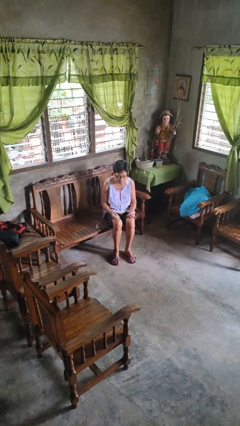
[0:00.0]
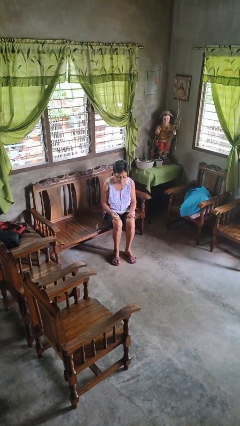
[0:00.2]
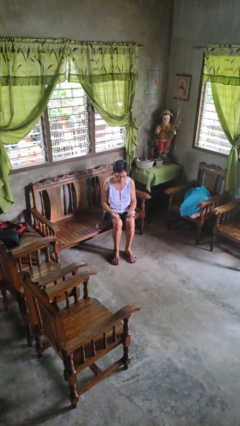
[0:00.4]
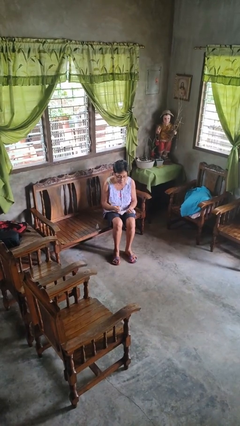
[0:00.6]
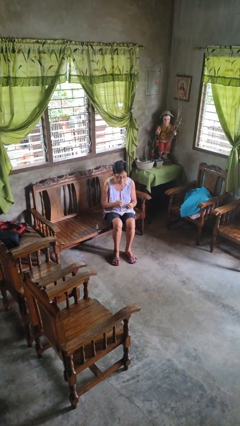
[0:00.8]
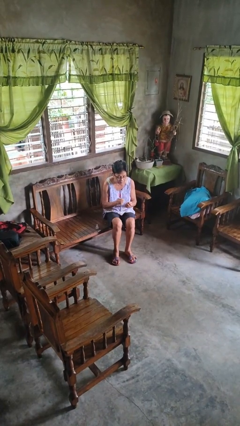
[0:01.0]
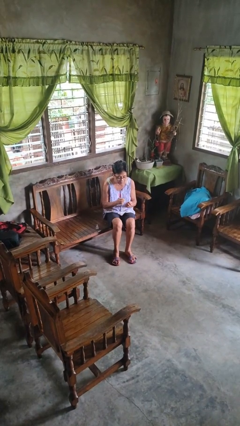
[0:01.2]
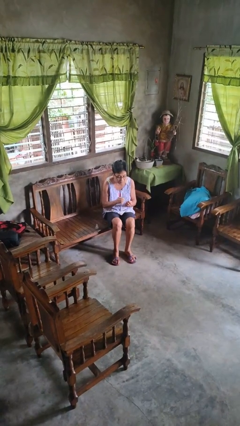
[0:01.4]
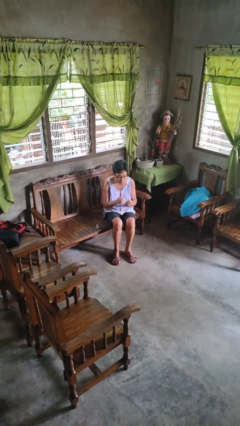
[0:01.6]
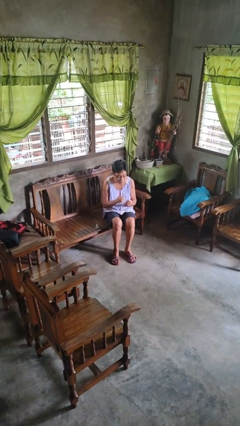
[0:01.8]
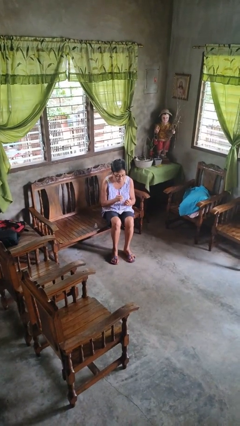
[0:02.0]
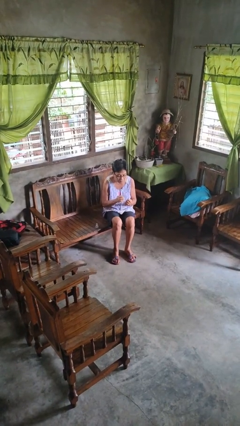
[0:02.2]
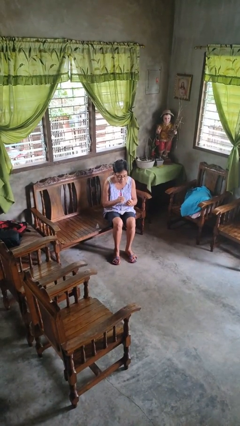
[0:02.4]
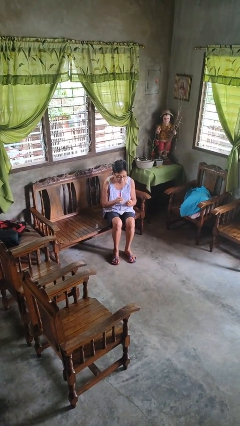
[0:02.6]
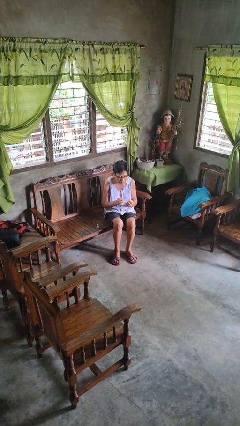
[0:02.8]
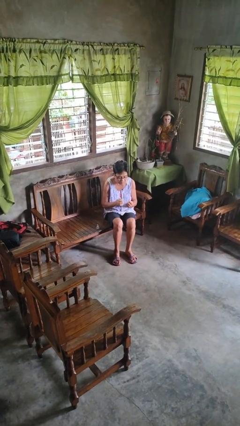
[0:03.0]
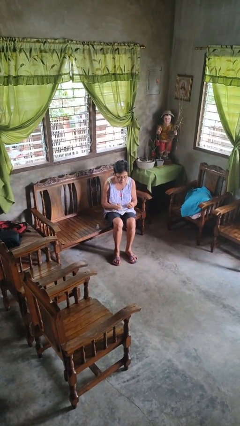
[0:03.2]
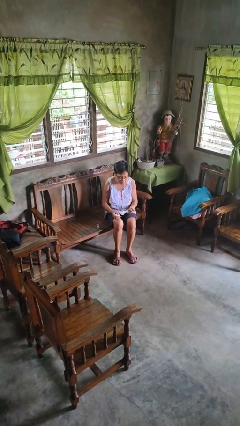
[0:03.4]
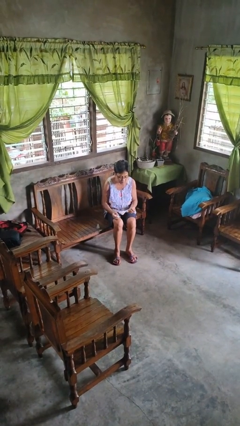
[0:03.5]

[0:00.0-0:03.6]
person paints fingernails

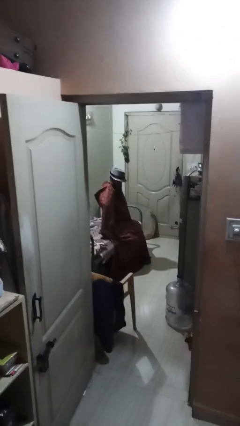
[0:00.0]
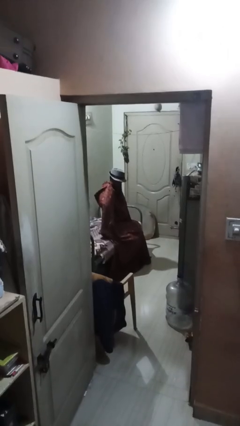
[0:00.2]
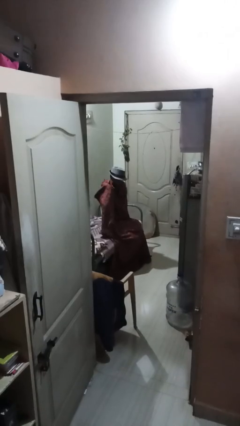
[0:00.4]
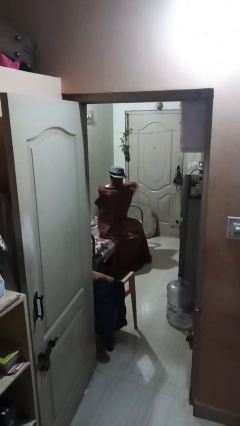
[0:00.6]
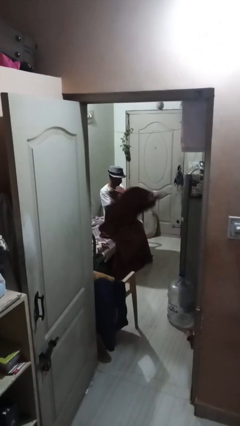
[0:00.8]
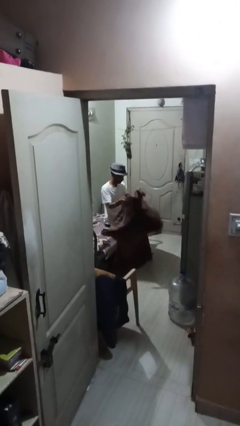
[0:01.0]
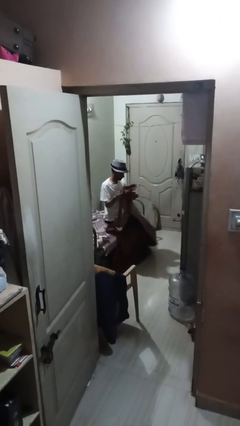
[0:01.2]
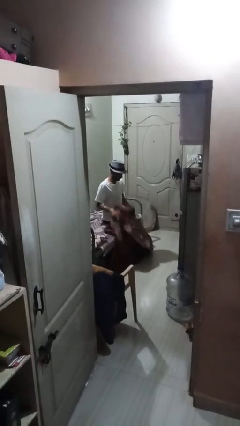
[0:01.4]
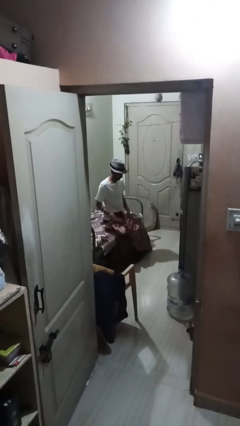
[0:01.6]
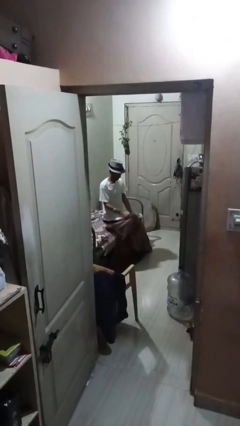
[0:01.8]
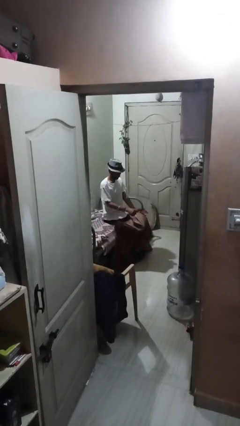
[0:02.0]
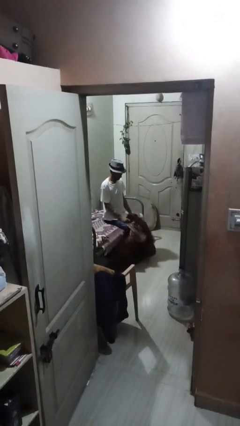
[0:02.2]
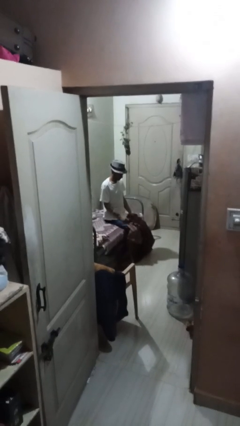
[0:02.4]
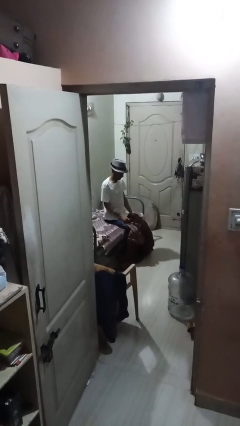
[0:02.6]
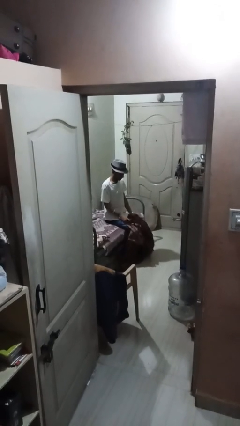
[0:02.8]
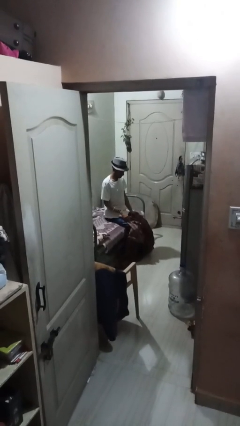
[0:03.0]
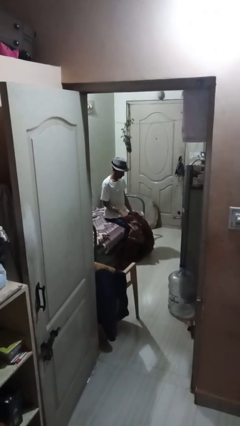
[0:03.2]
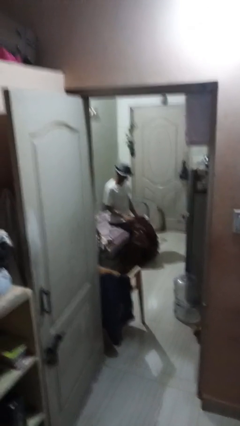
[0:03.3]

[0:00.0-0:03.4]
person uncovers with blanket

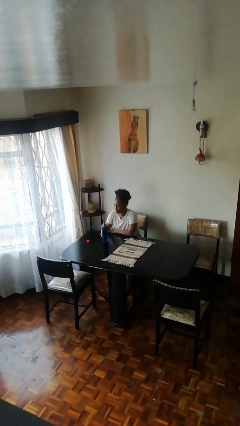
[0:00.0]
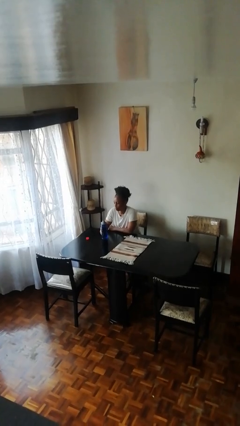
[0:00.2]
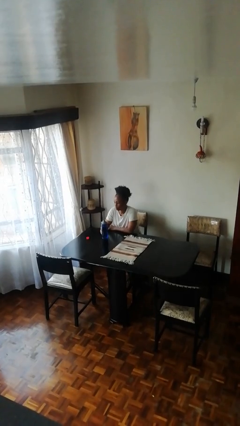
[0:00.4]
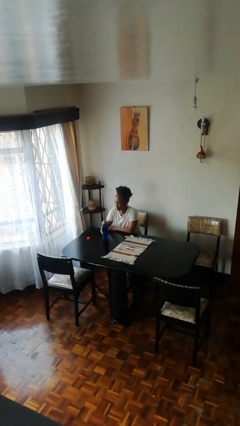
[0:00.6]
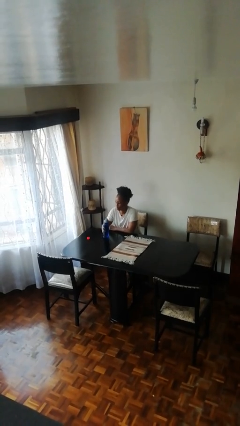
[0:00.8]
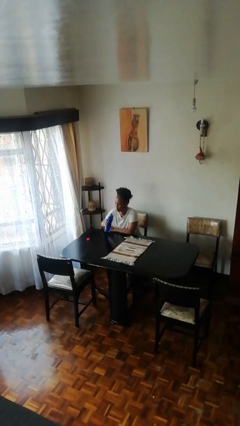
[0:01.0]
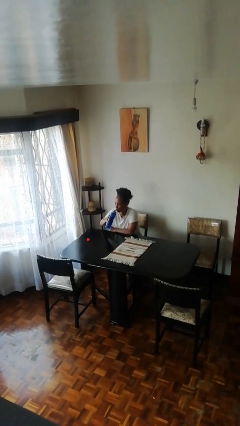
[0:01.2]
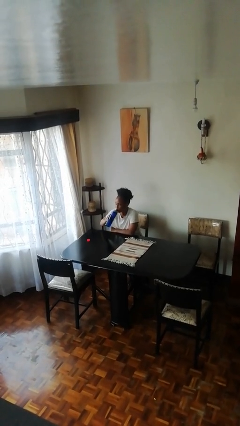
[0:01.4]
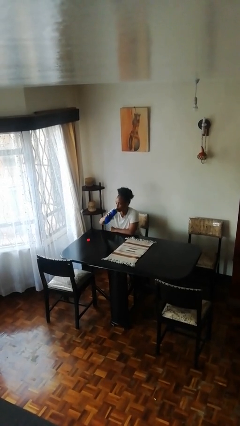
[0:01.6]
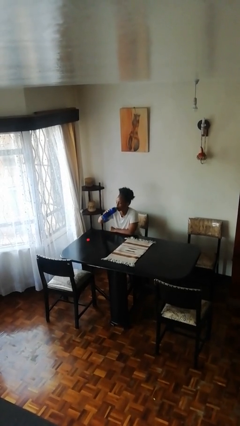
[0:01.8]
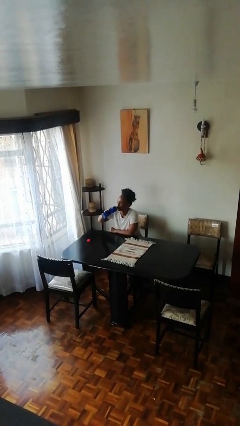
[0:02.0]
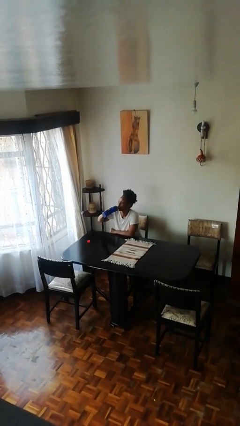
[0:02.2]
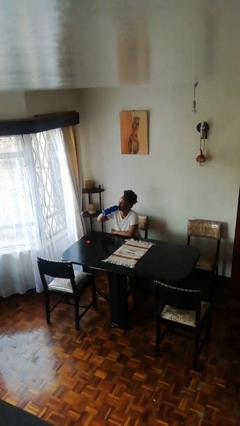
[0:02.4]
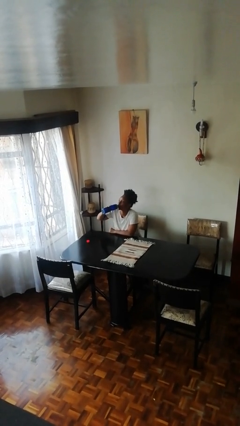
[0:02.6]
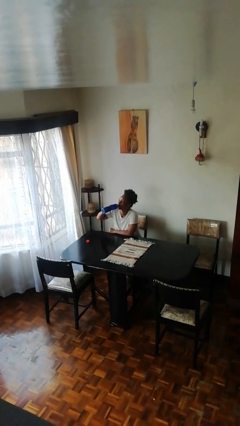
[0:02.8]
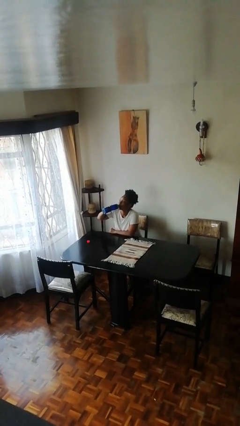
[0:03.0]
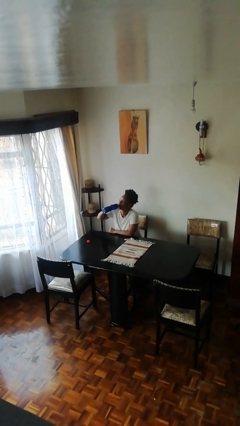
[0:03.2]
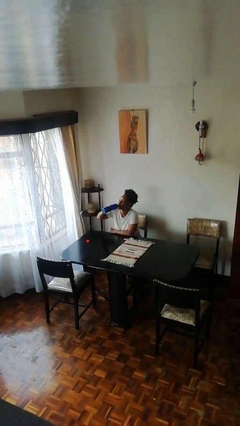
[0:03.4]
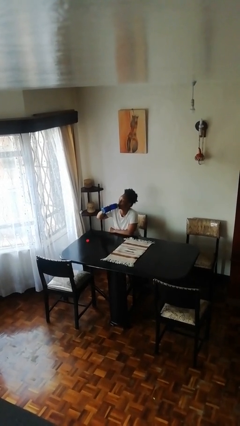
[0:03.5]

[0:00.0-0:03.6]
person drinks from bottle

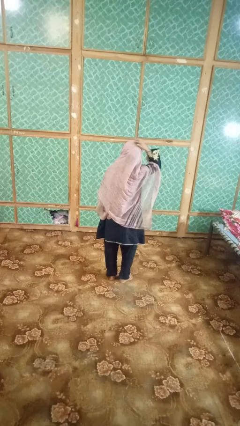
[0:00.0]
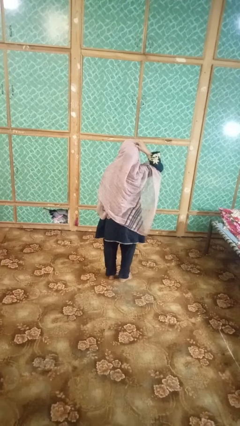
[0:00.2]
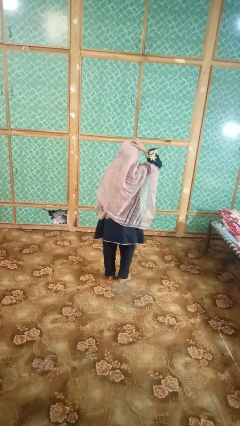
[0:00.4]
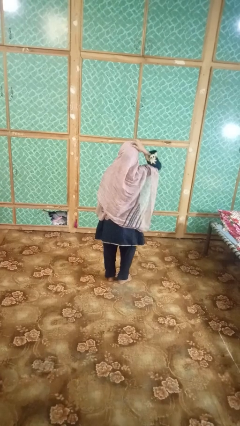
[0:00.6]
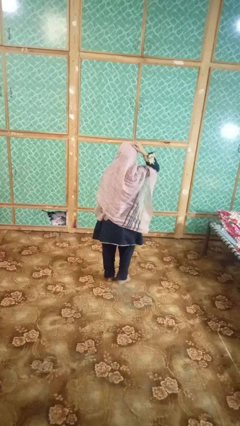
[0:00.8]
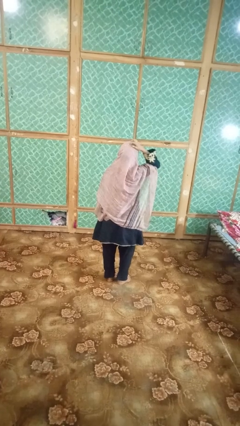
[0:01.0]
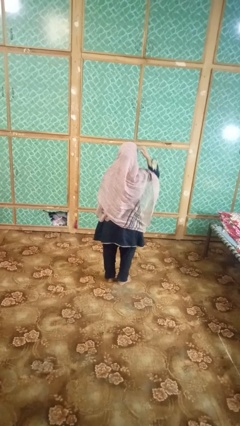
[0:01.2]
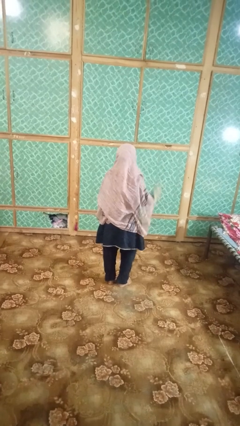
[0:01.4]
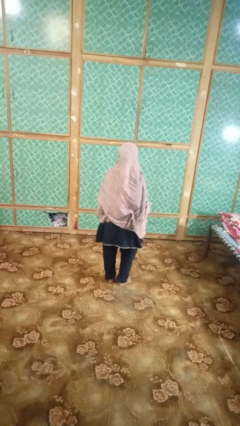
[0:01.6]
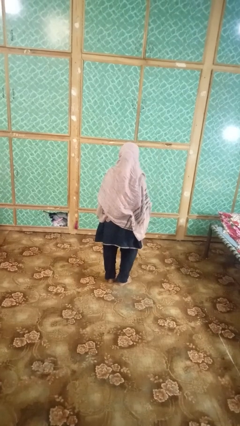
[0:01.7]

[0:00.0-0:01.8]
person strokes hair

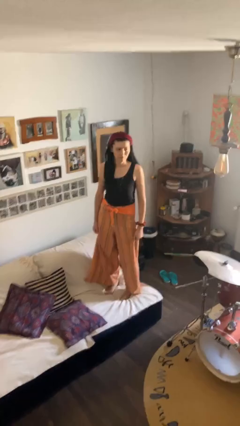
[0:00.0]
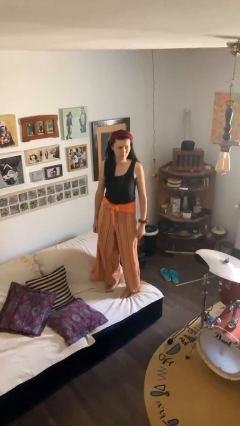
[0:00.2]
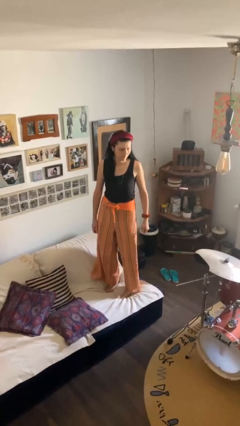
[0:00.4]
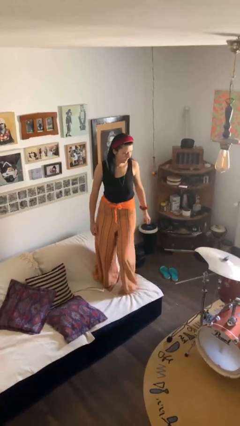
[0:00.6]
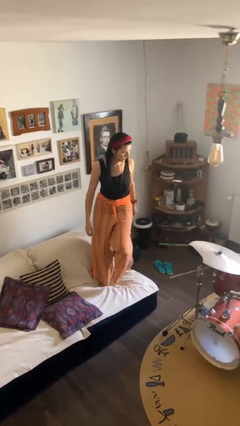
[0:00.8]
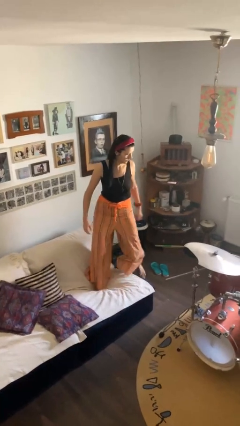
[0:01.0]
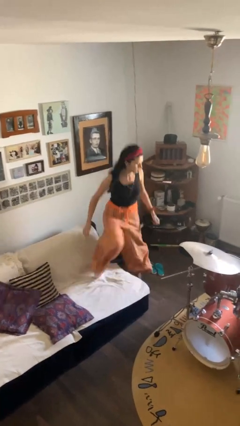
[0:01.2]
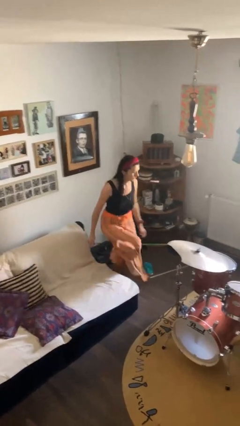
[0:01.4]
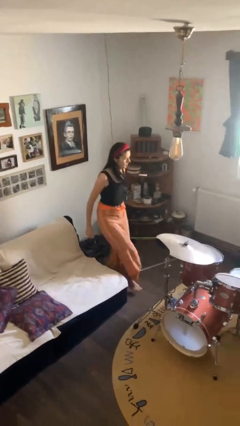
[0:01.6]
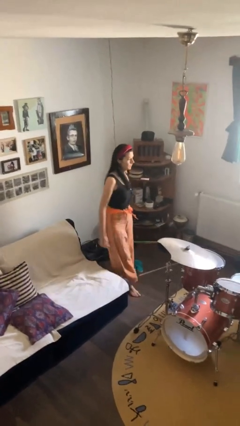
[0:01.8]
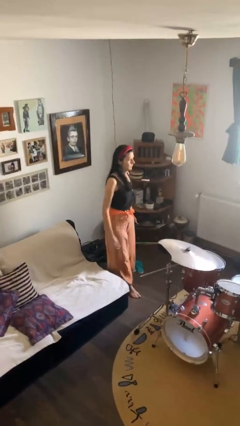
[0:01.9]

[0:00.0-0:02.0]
person climbs off couch

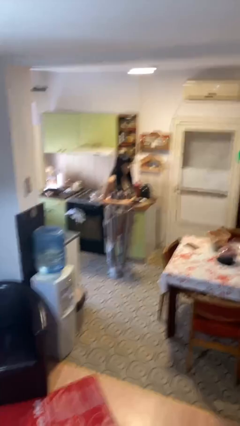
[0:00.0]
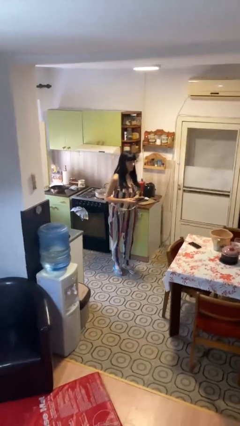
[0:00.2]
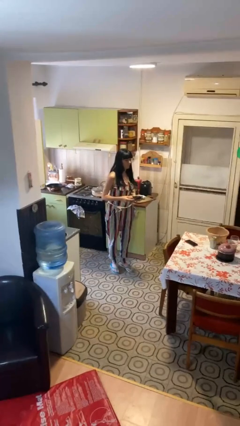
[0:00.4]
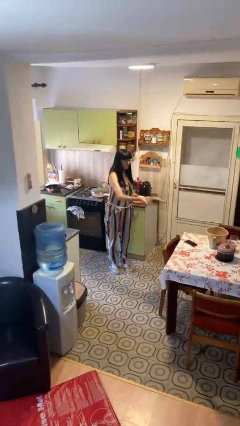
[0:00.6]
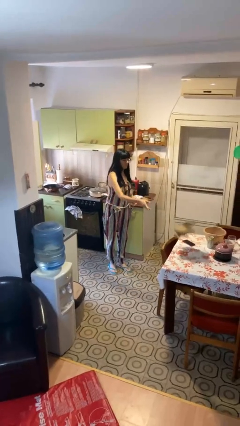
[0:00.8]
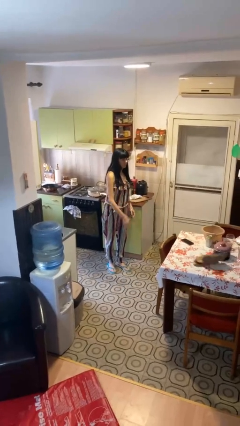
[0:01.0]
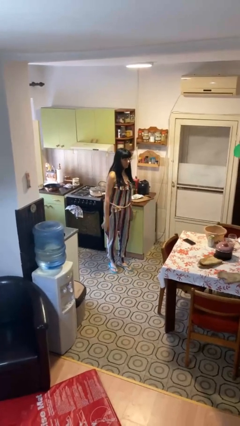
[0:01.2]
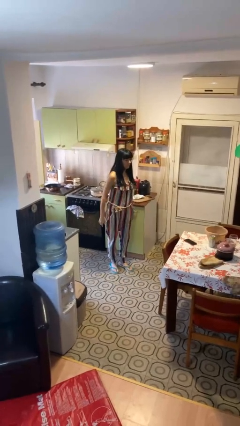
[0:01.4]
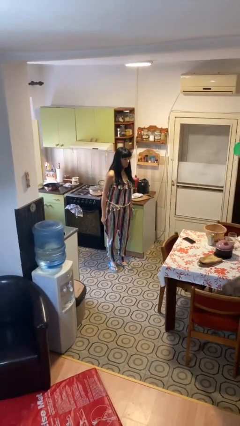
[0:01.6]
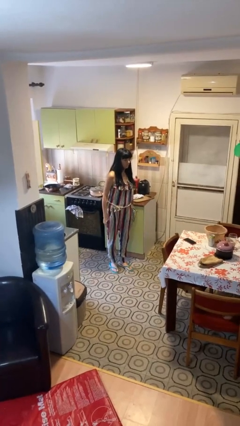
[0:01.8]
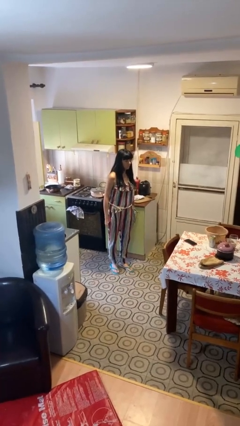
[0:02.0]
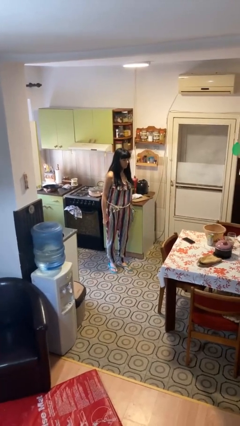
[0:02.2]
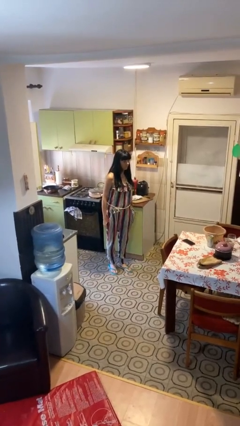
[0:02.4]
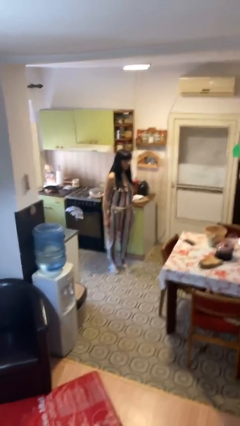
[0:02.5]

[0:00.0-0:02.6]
person throws object on table

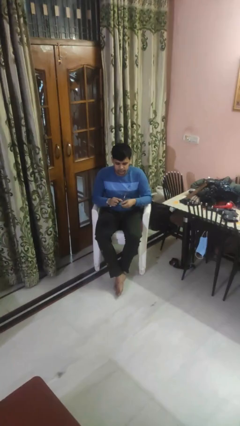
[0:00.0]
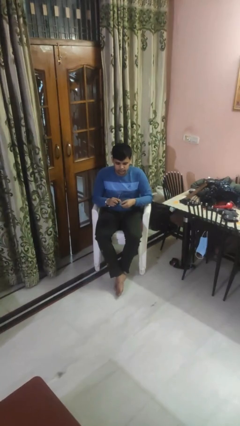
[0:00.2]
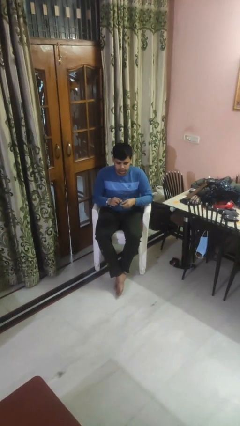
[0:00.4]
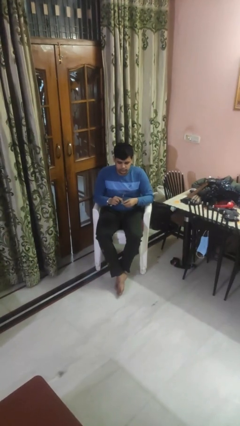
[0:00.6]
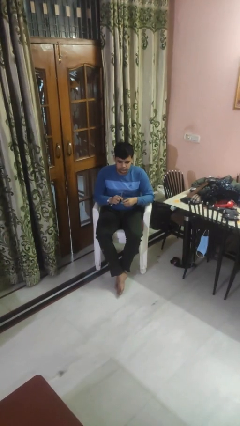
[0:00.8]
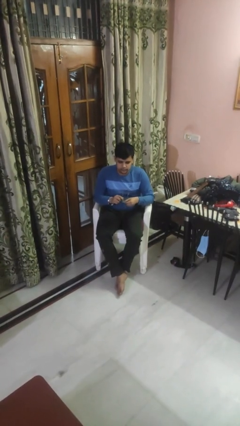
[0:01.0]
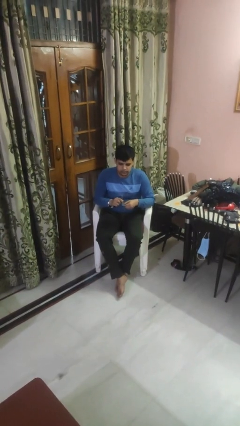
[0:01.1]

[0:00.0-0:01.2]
person cleans eyeglasses
